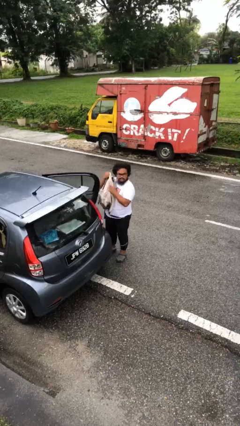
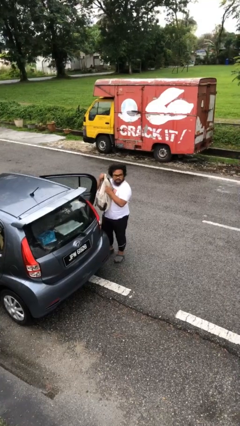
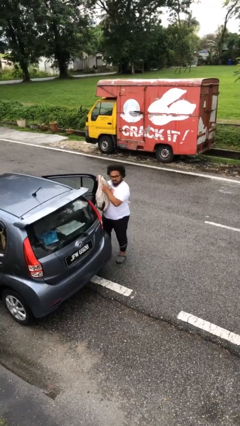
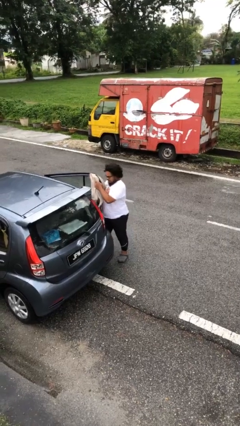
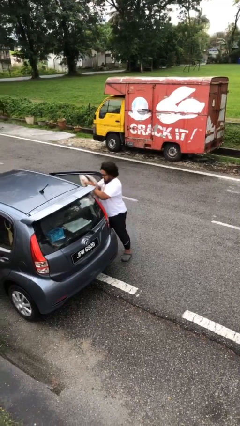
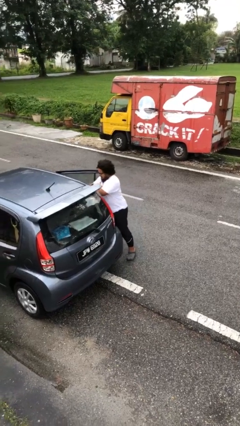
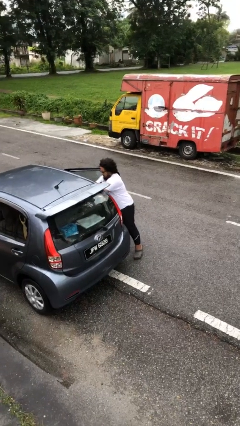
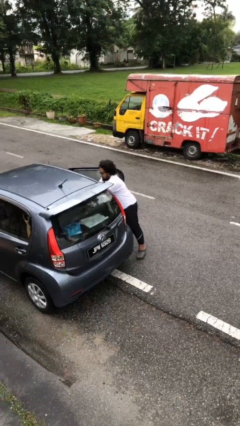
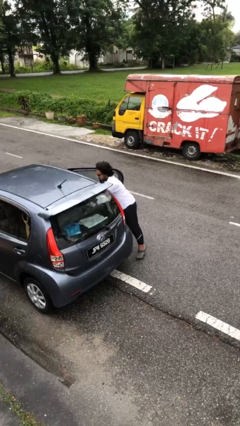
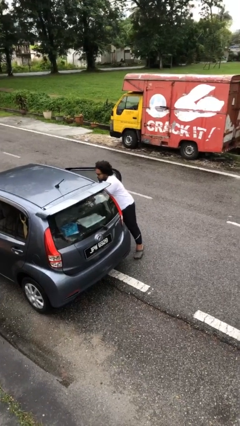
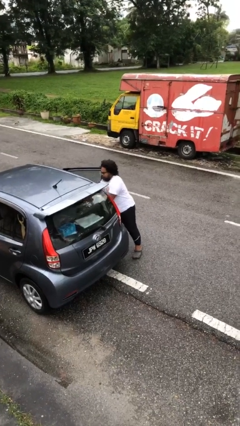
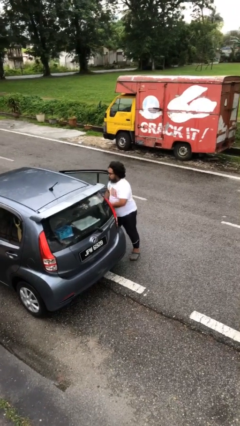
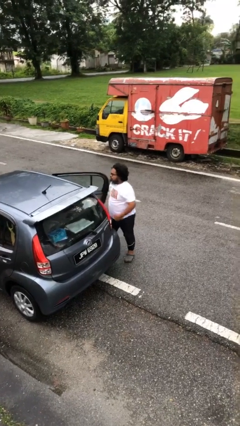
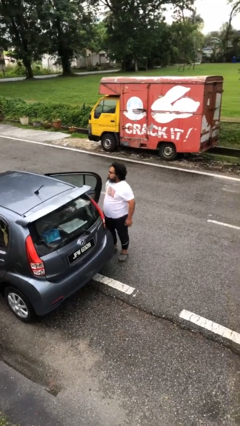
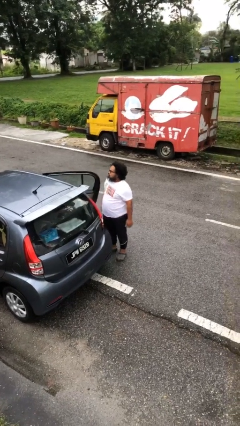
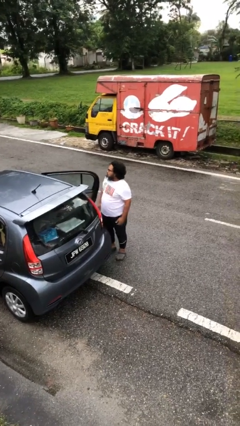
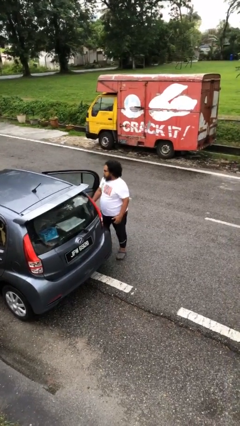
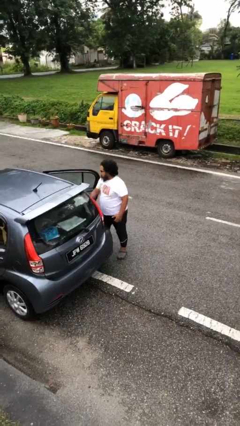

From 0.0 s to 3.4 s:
person loads car

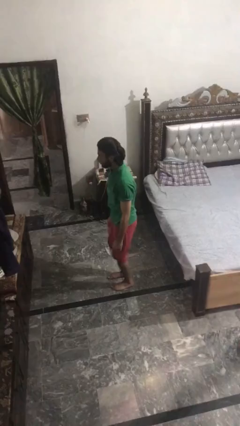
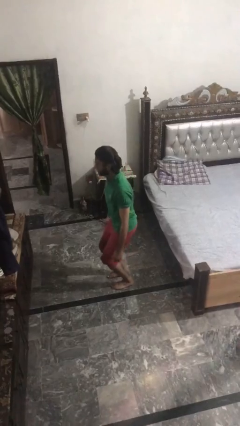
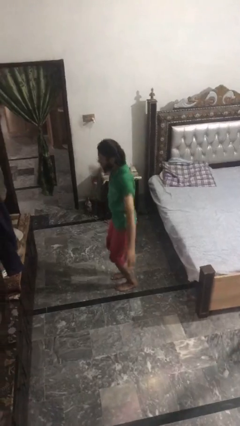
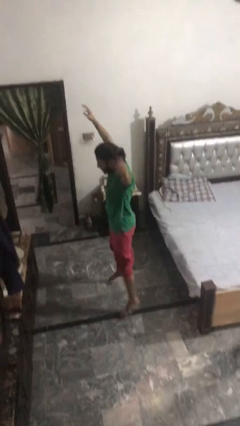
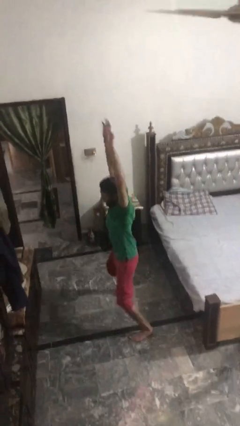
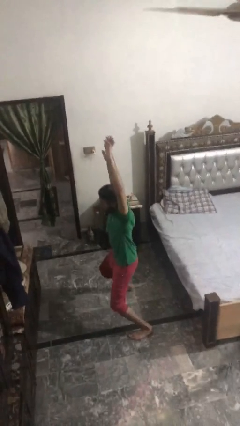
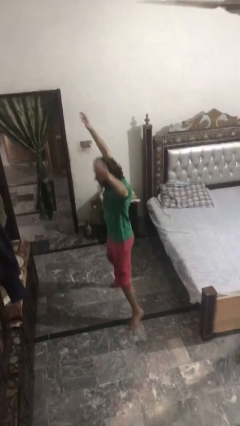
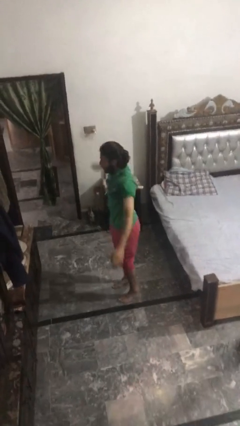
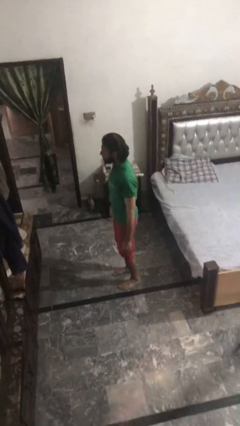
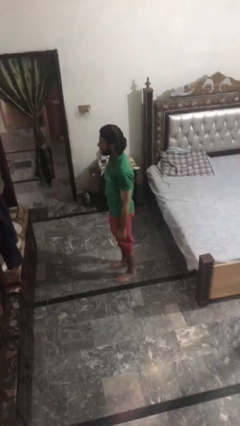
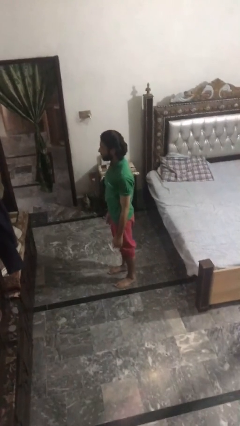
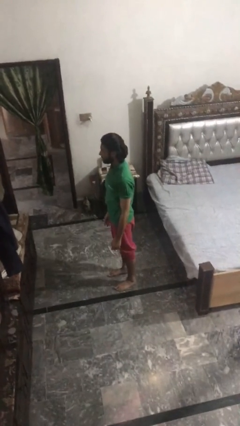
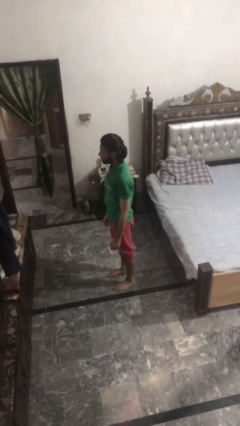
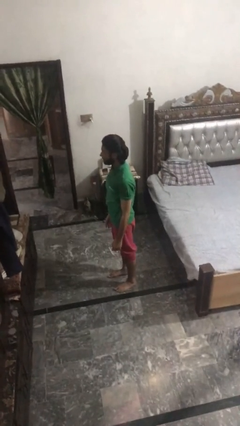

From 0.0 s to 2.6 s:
person exercises with jumping jacks

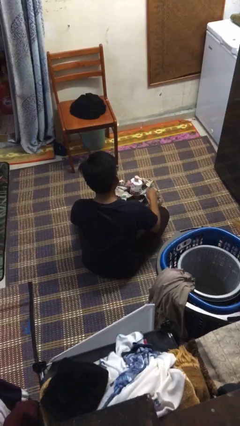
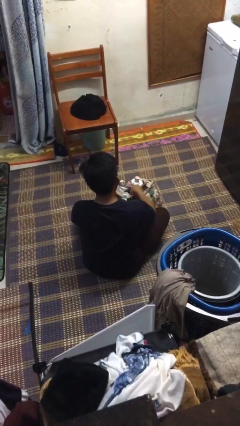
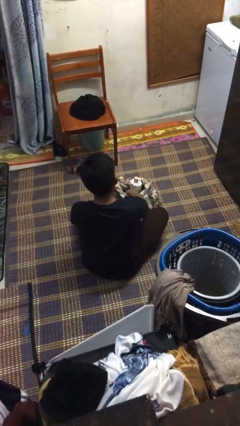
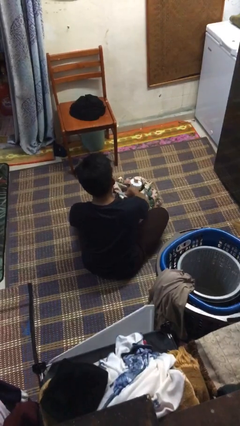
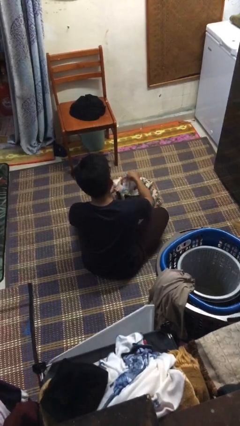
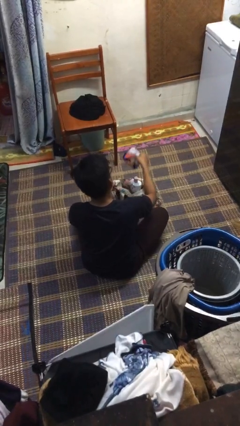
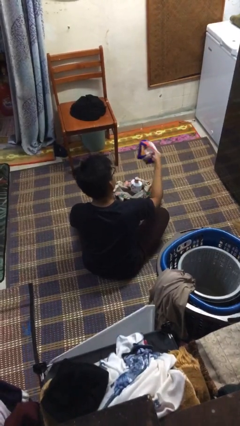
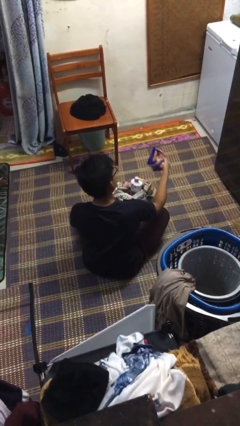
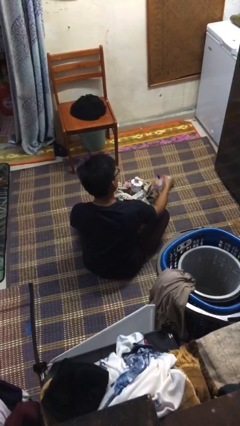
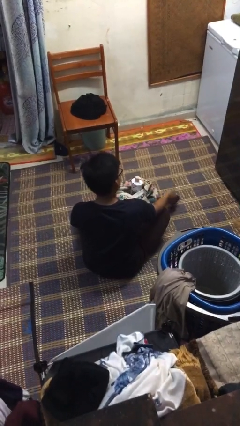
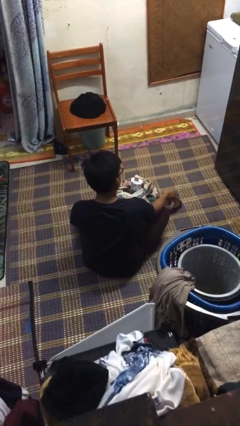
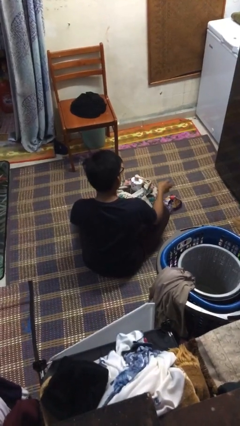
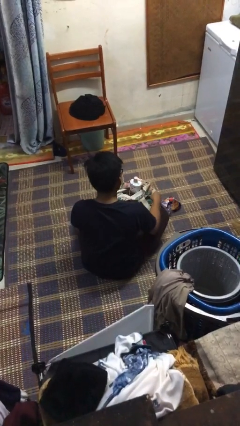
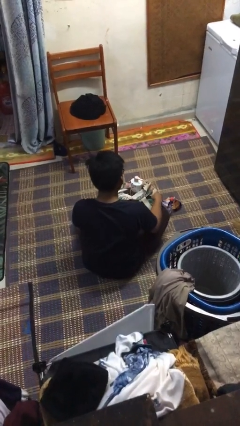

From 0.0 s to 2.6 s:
person takes object from bag

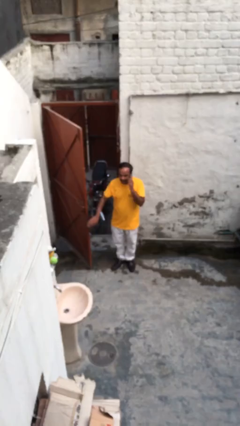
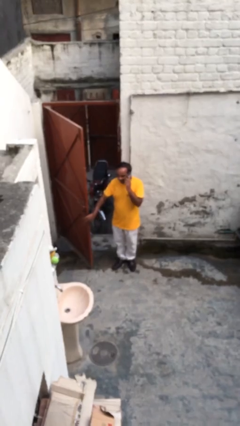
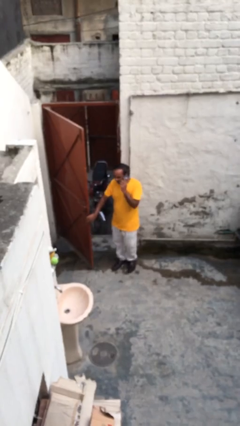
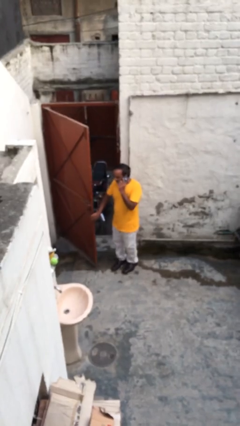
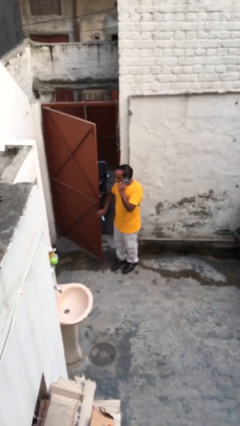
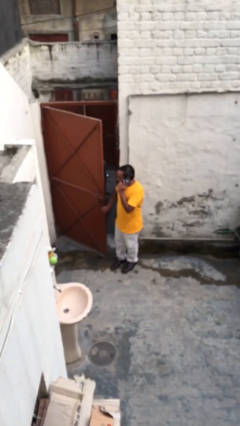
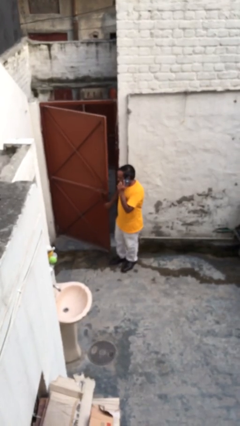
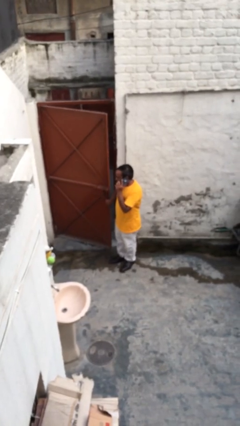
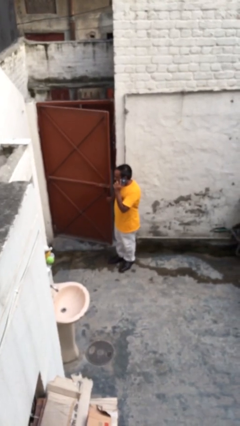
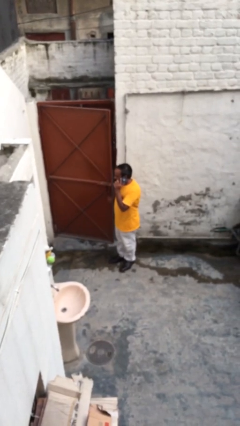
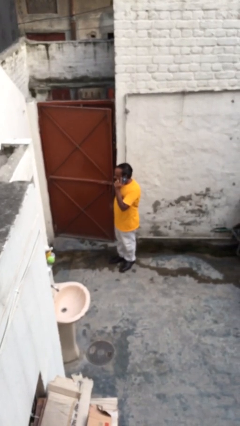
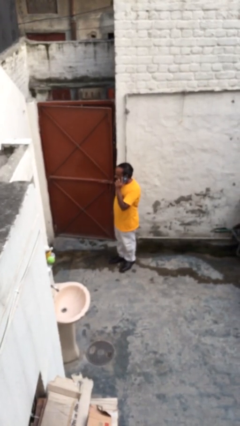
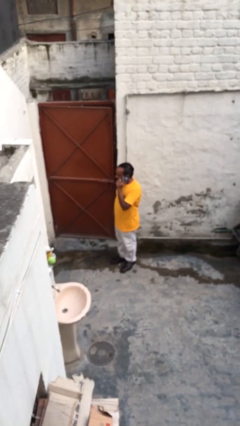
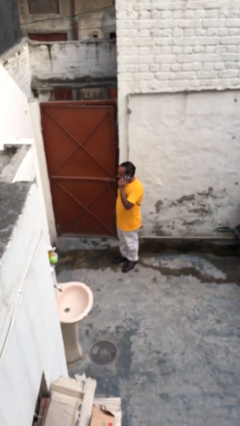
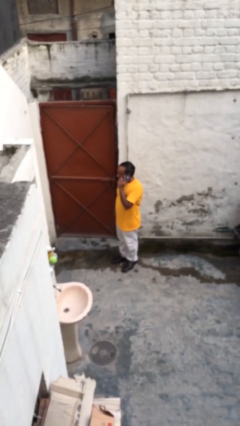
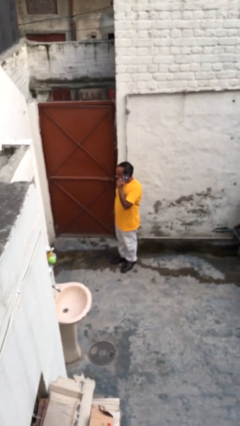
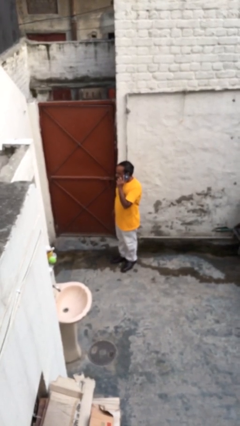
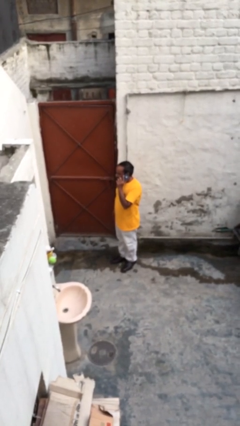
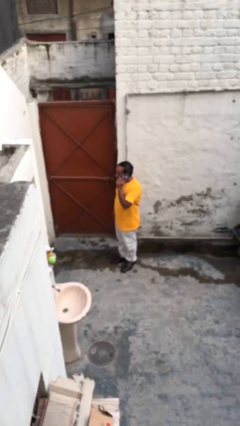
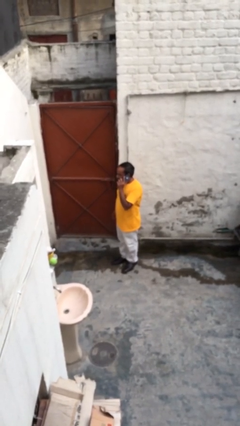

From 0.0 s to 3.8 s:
person closes facility door

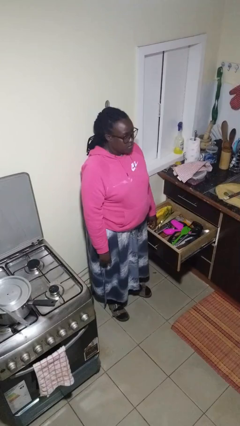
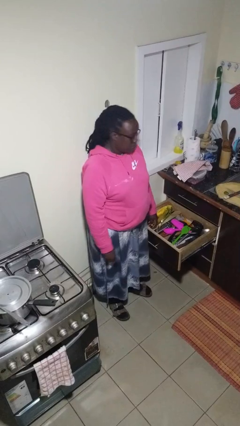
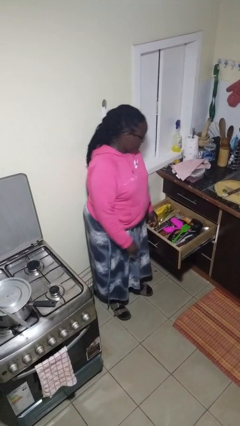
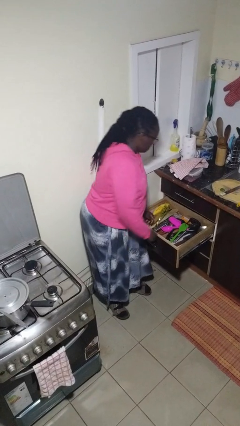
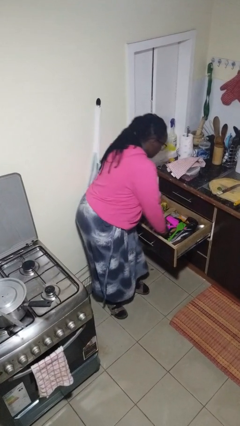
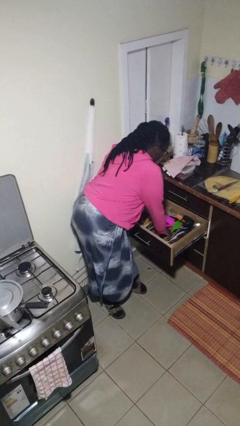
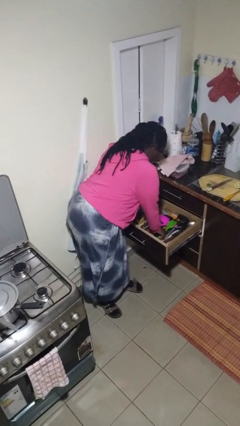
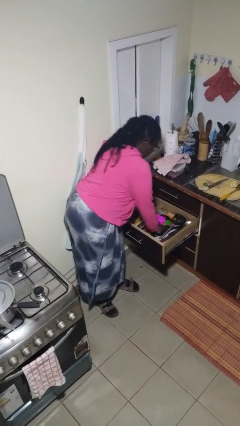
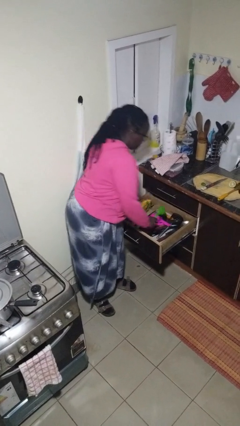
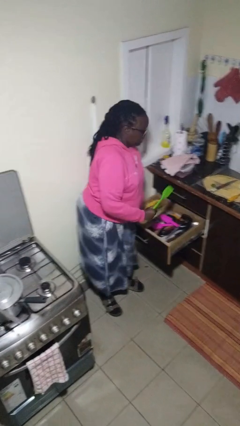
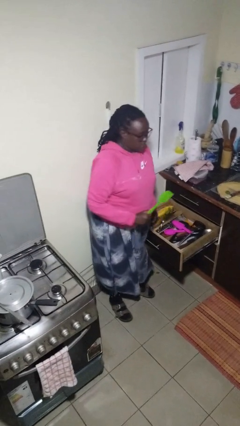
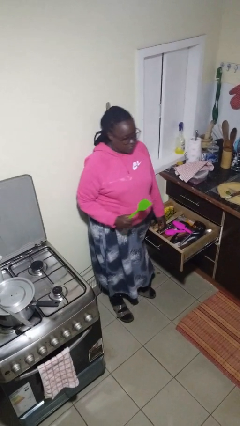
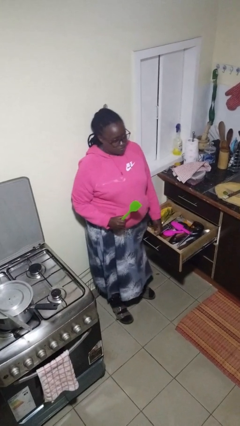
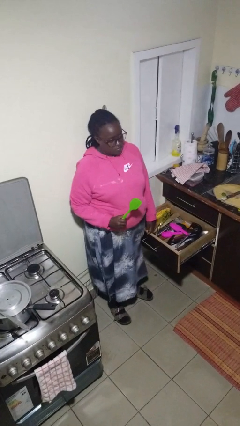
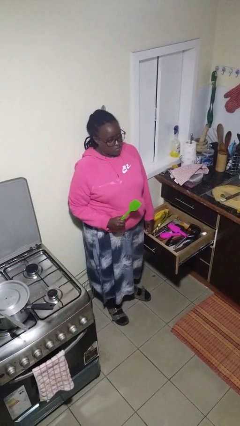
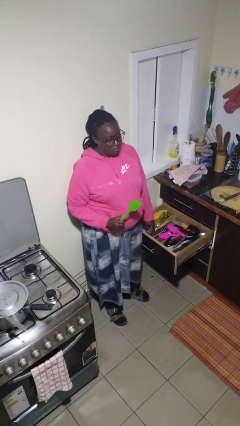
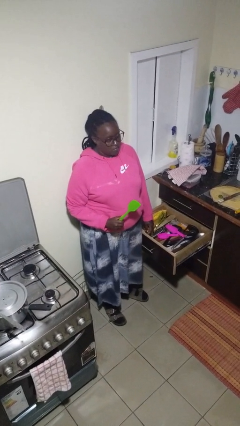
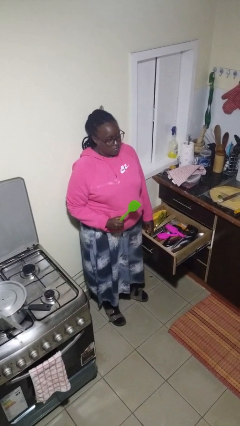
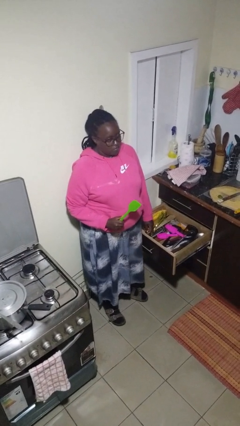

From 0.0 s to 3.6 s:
person takes object from kitchen drawer

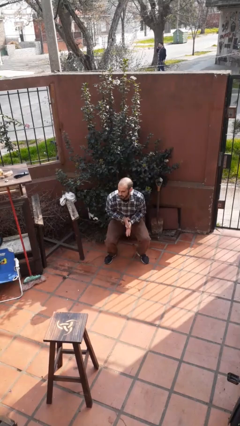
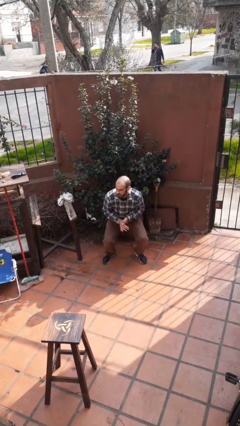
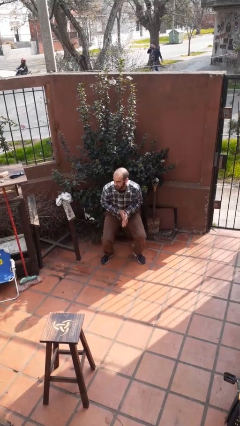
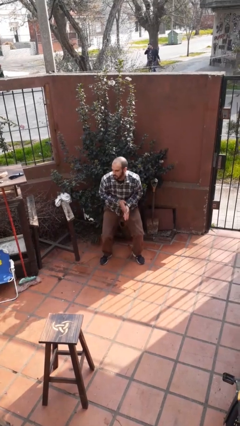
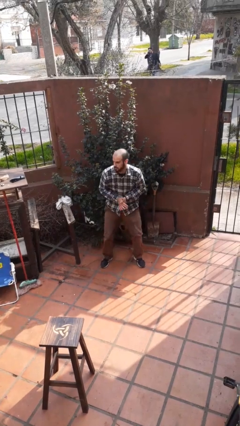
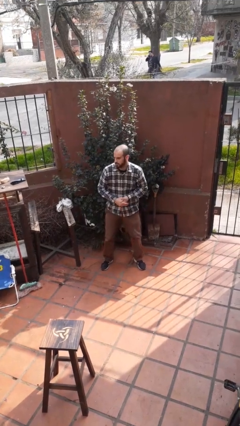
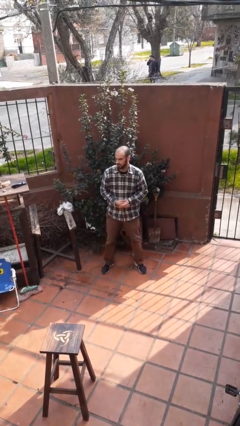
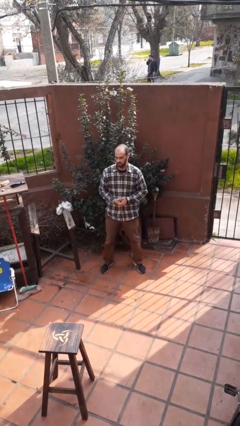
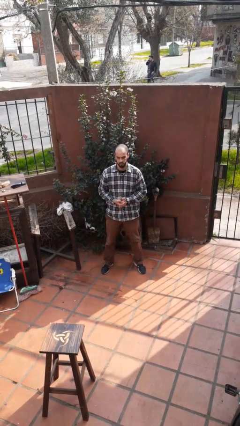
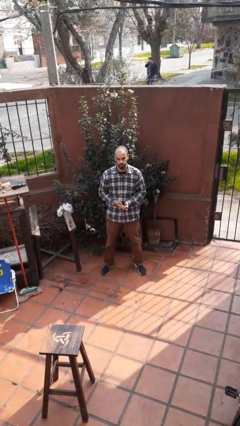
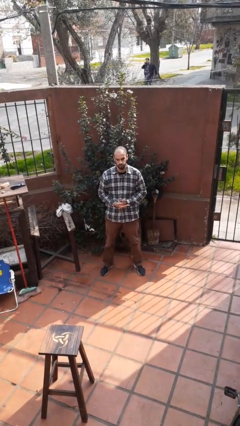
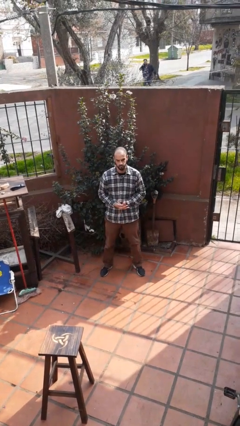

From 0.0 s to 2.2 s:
person stands up
